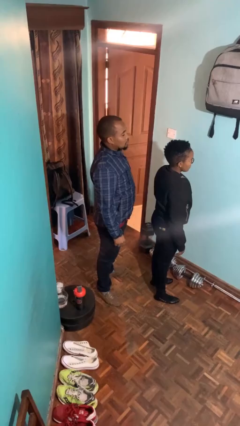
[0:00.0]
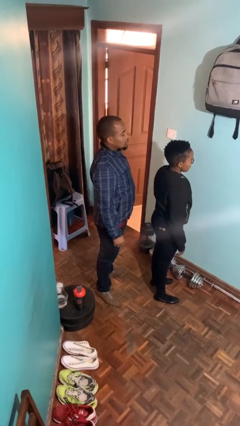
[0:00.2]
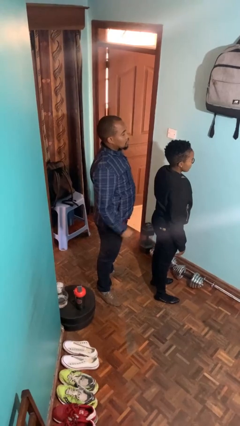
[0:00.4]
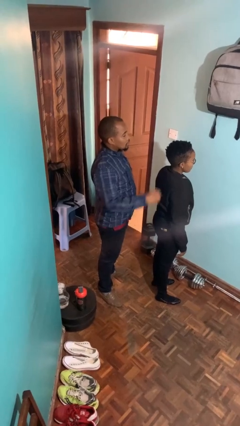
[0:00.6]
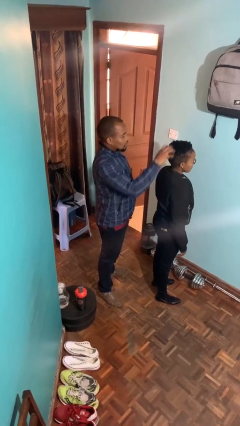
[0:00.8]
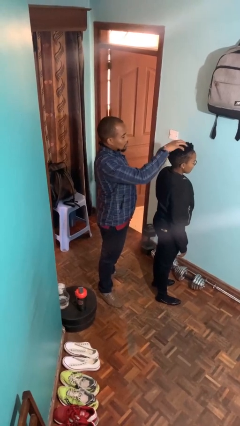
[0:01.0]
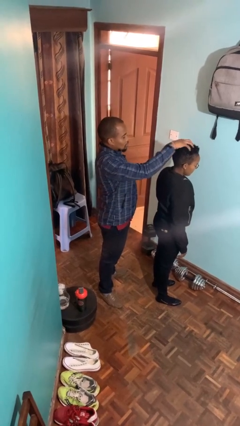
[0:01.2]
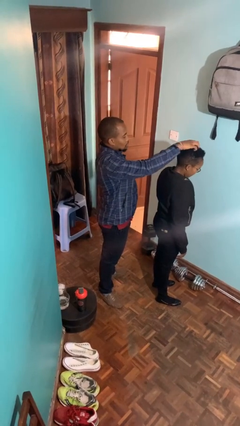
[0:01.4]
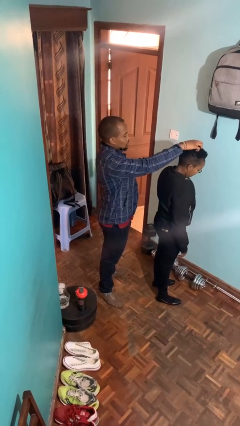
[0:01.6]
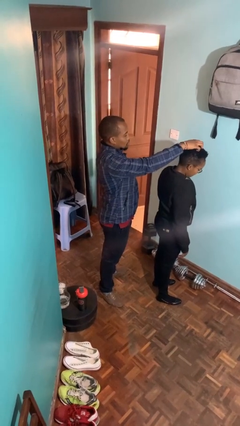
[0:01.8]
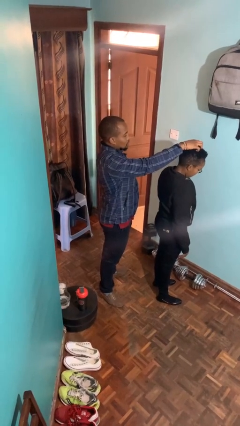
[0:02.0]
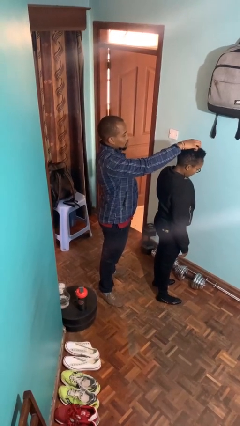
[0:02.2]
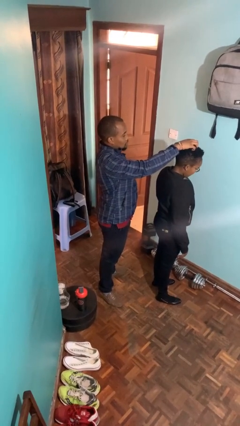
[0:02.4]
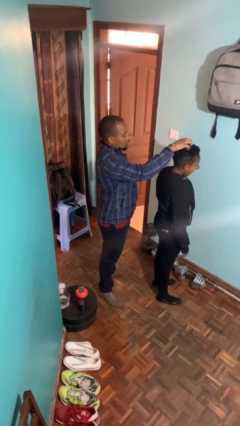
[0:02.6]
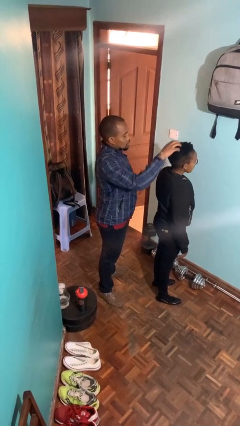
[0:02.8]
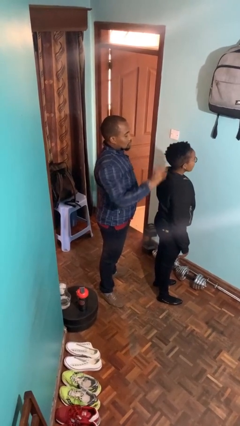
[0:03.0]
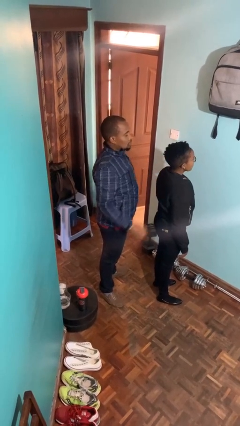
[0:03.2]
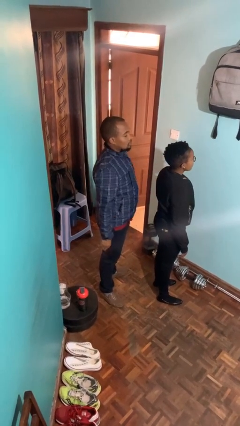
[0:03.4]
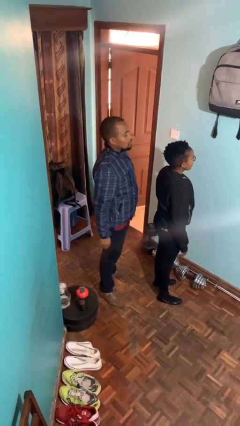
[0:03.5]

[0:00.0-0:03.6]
person grabs person by hair

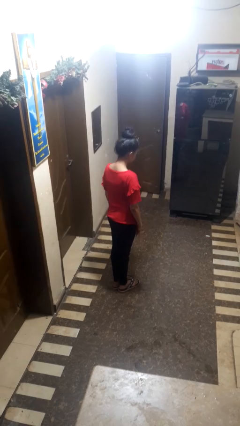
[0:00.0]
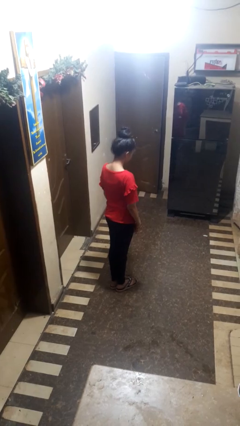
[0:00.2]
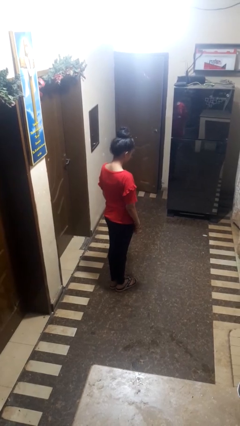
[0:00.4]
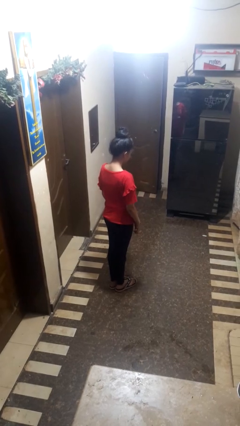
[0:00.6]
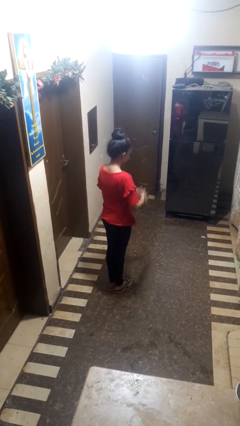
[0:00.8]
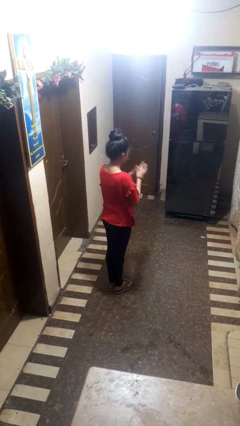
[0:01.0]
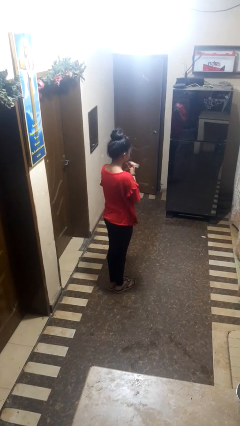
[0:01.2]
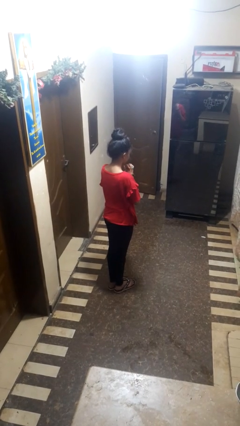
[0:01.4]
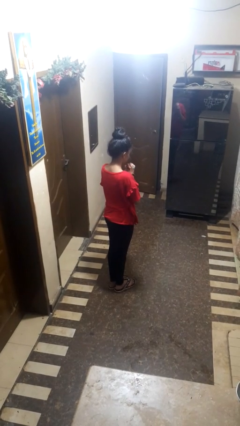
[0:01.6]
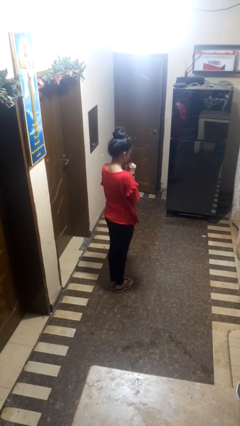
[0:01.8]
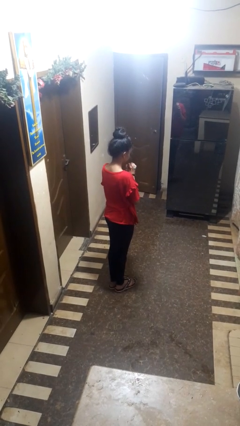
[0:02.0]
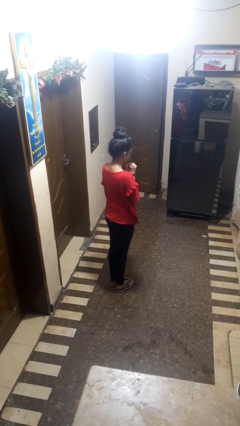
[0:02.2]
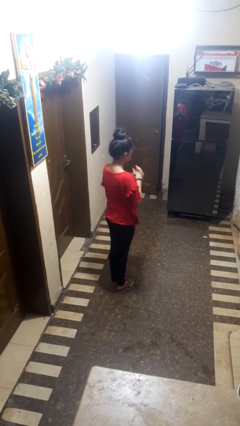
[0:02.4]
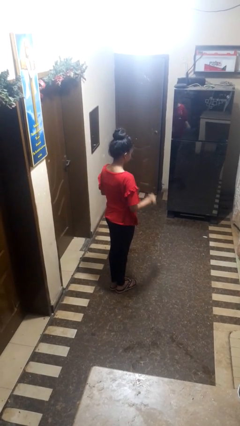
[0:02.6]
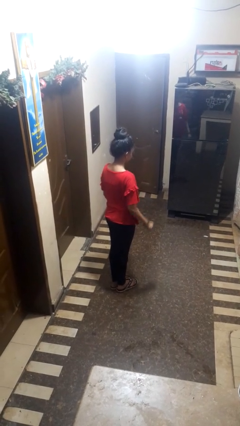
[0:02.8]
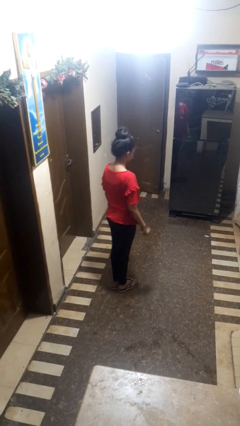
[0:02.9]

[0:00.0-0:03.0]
person prays

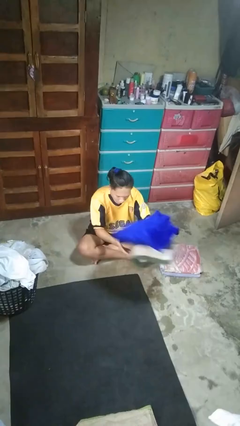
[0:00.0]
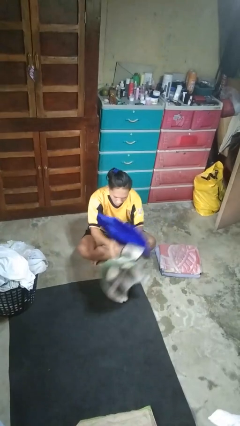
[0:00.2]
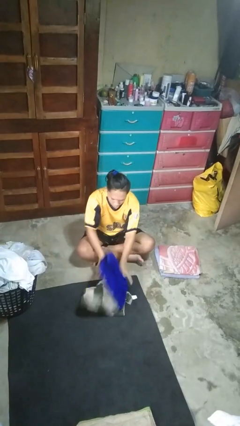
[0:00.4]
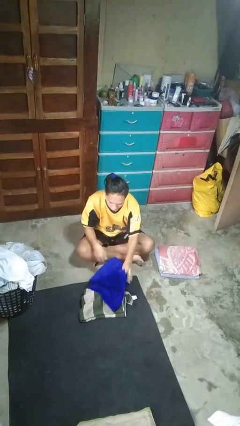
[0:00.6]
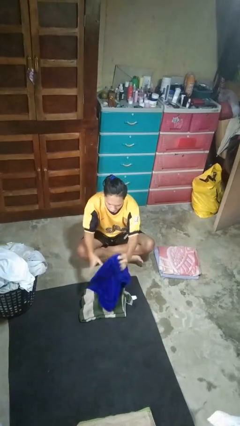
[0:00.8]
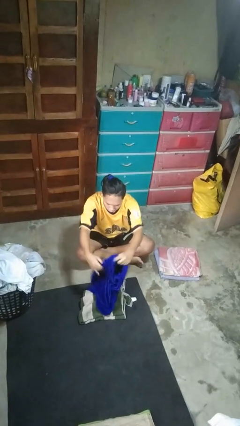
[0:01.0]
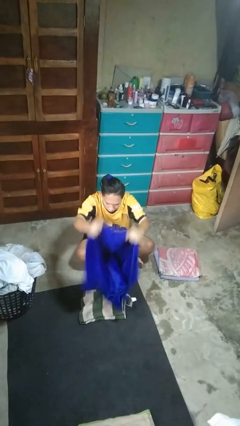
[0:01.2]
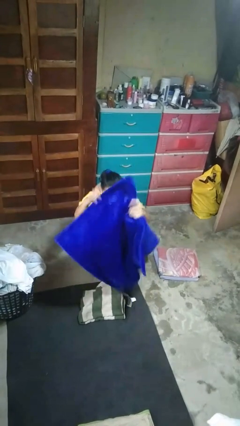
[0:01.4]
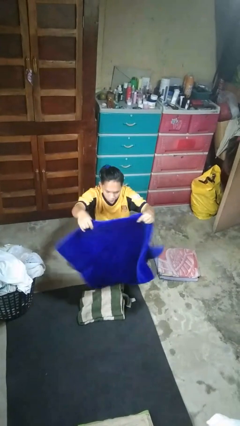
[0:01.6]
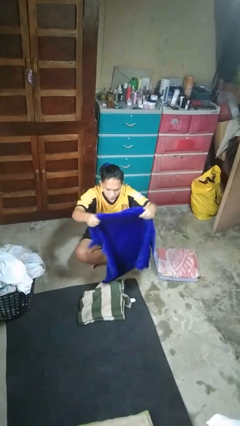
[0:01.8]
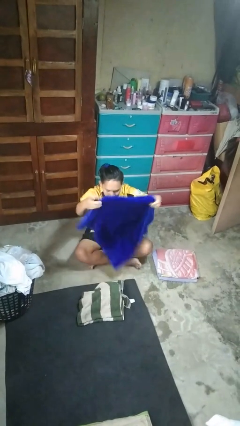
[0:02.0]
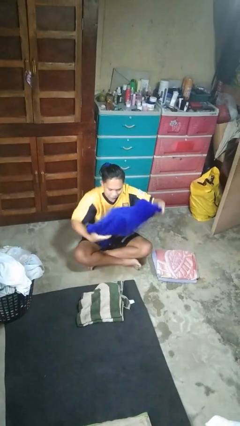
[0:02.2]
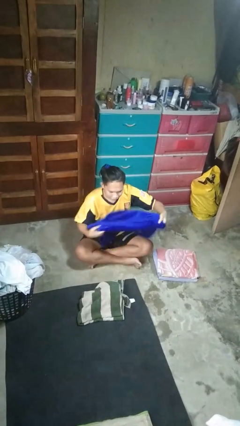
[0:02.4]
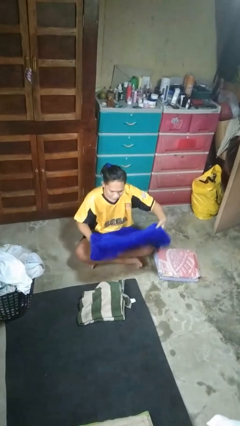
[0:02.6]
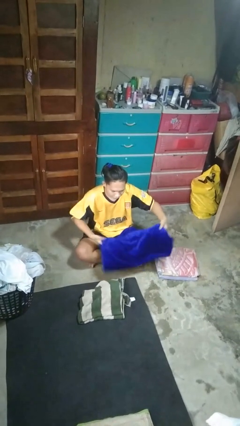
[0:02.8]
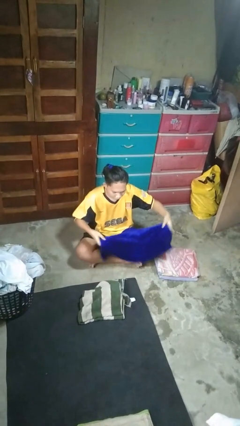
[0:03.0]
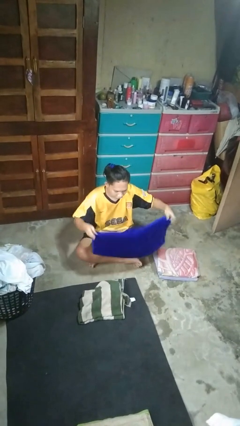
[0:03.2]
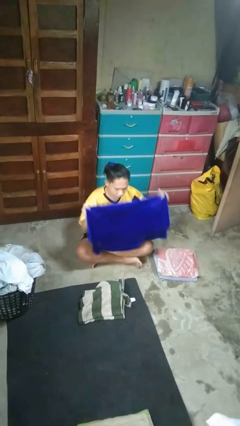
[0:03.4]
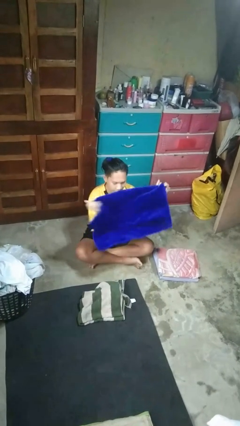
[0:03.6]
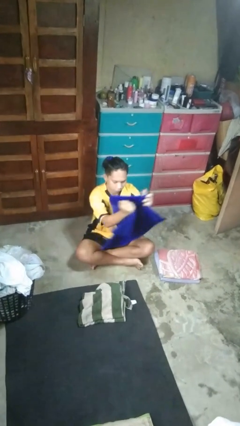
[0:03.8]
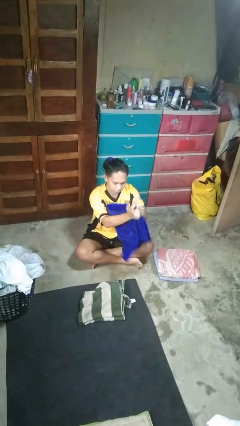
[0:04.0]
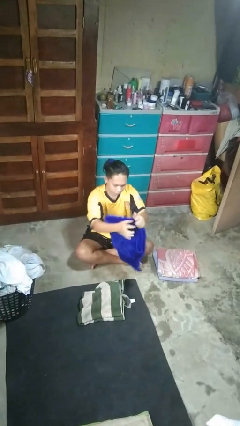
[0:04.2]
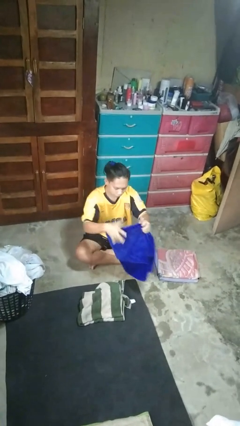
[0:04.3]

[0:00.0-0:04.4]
person folds towel

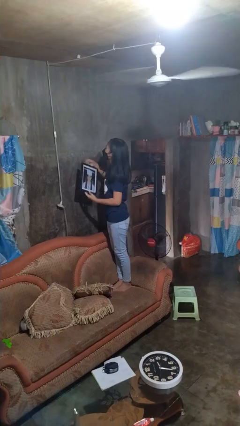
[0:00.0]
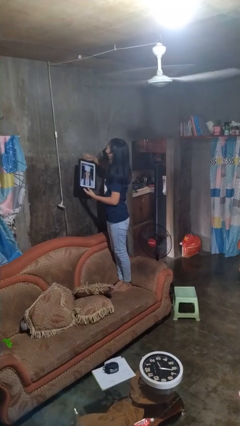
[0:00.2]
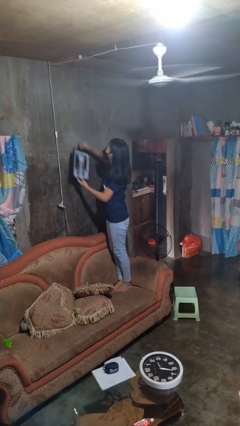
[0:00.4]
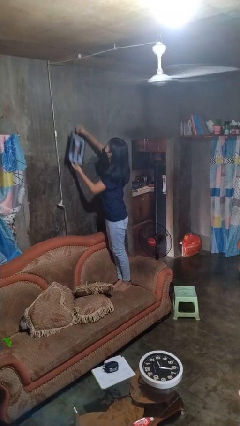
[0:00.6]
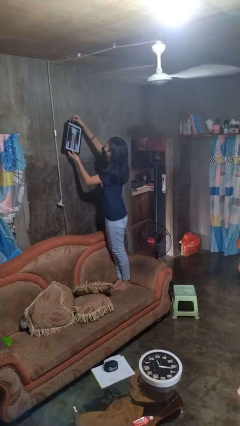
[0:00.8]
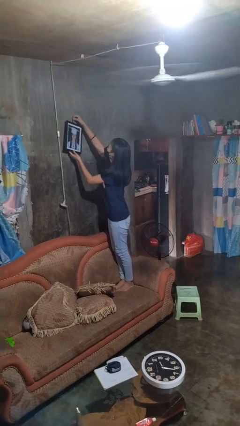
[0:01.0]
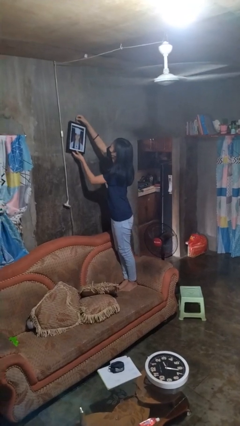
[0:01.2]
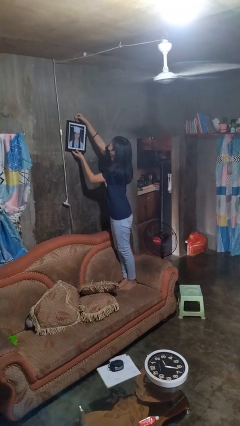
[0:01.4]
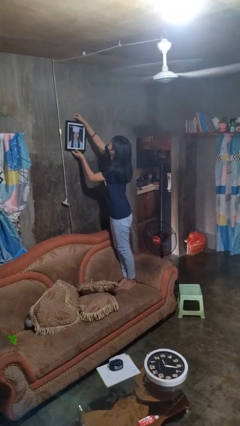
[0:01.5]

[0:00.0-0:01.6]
person puts up picture frame

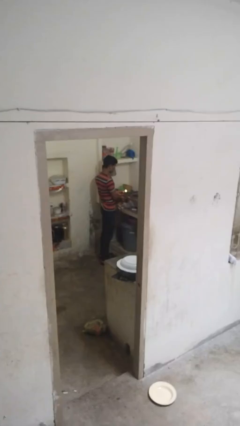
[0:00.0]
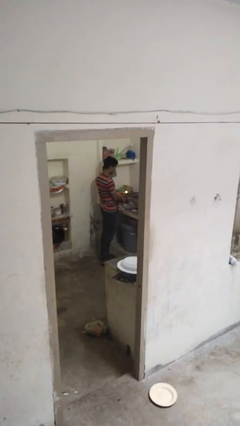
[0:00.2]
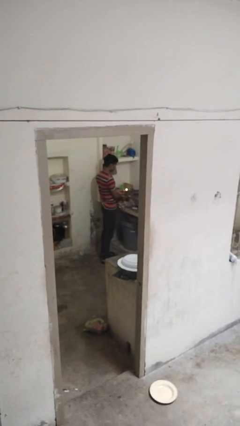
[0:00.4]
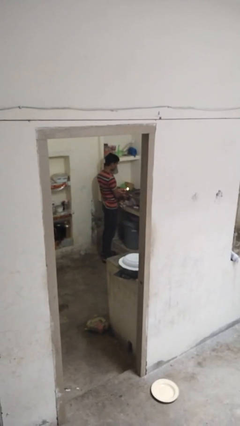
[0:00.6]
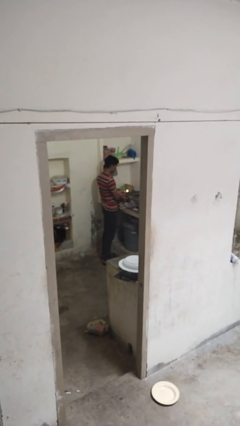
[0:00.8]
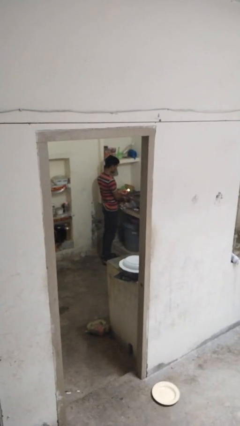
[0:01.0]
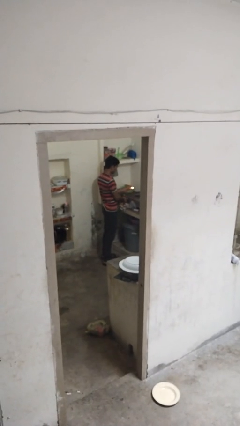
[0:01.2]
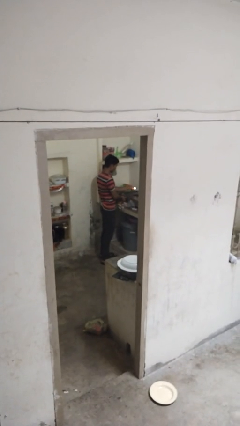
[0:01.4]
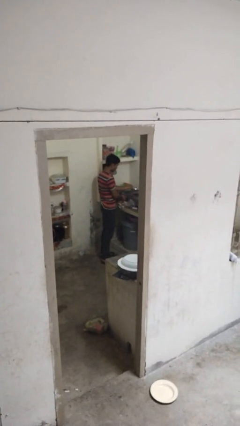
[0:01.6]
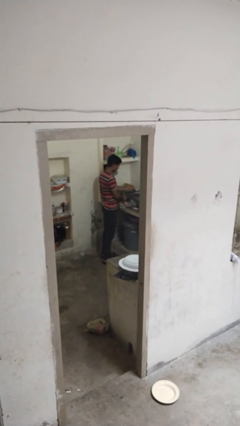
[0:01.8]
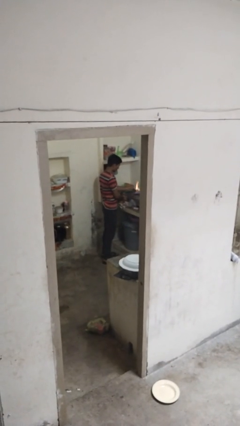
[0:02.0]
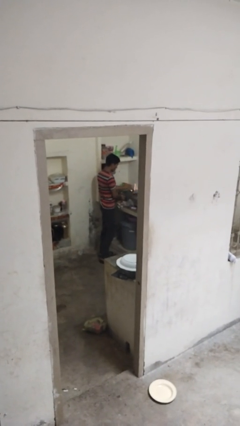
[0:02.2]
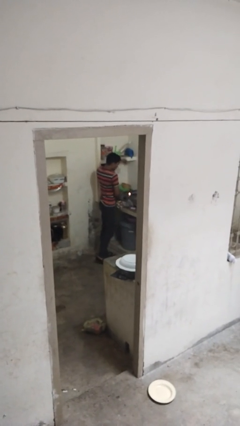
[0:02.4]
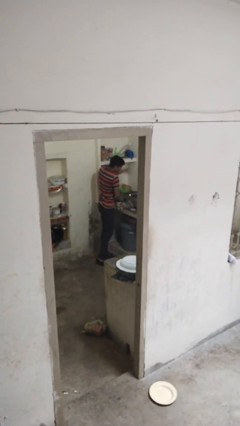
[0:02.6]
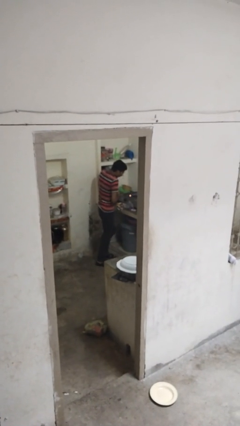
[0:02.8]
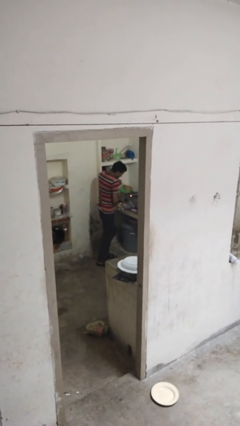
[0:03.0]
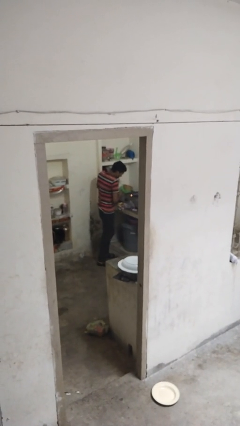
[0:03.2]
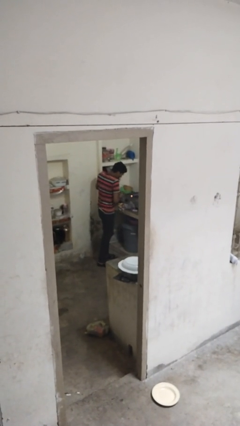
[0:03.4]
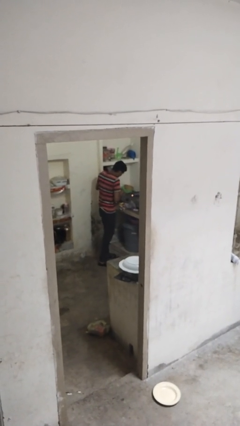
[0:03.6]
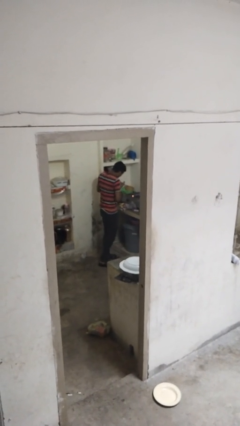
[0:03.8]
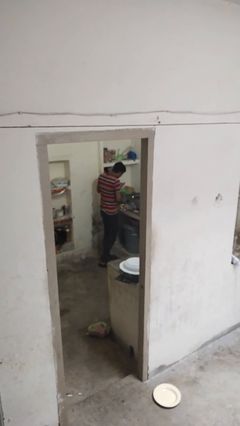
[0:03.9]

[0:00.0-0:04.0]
person burns hand

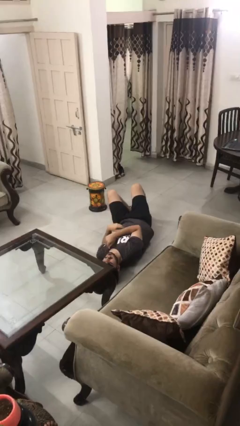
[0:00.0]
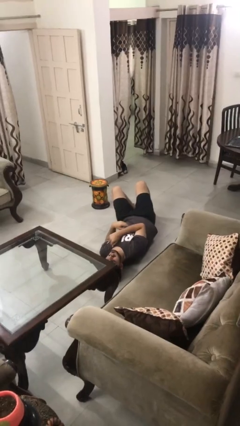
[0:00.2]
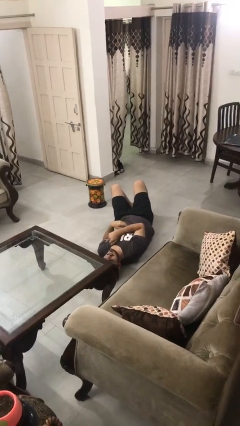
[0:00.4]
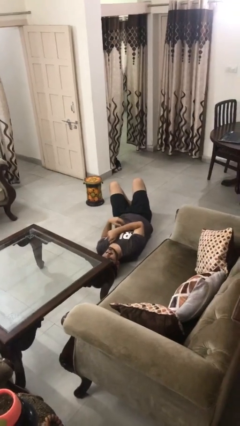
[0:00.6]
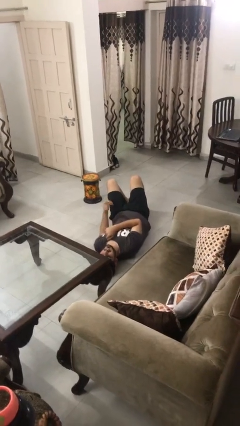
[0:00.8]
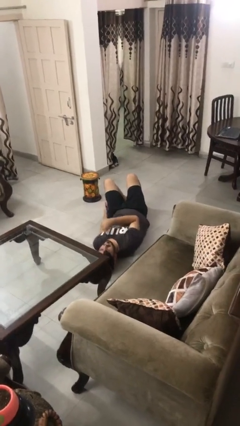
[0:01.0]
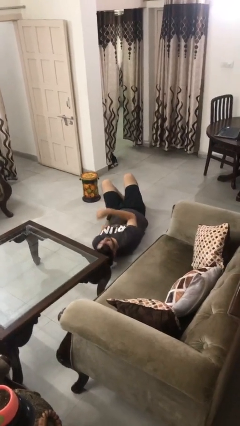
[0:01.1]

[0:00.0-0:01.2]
person lies down on floor
